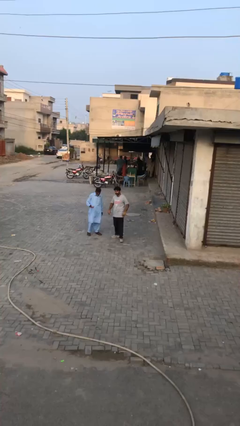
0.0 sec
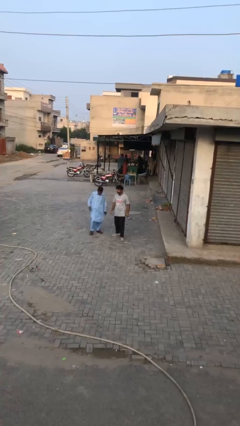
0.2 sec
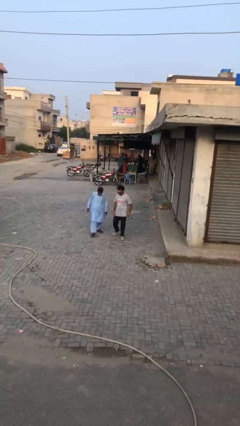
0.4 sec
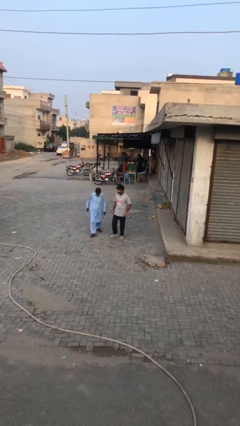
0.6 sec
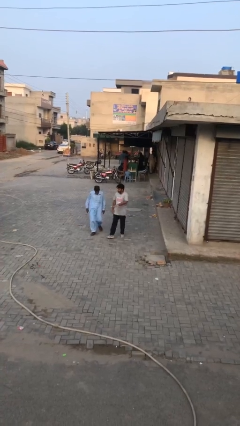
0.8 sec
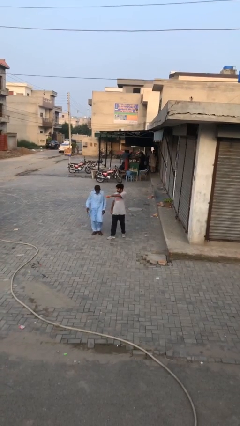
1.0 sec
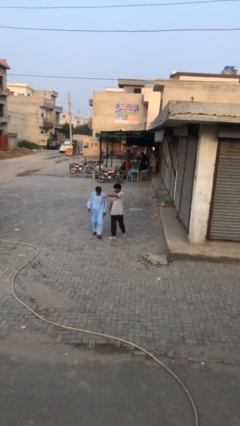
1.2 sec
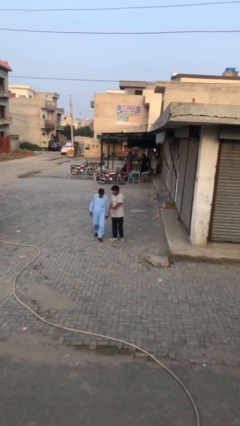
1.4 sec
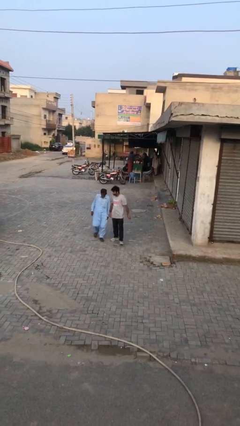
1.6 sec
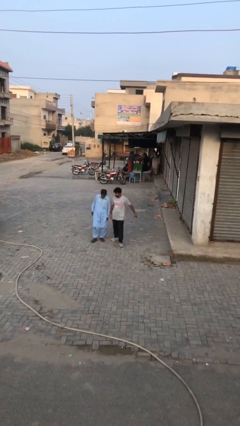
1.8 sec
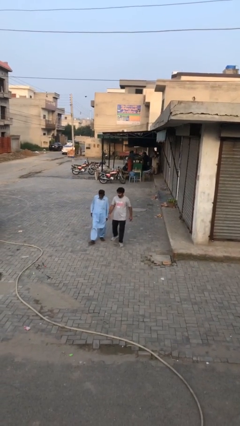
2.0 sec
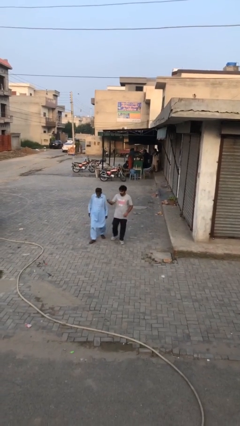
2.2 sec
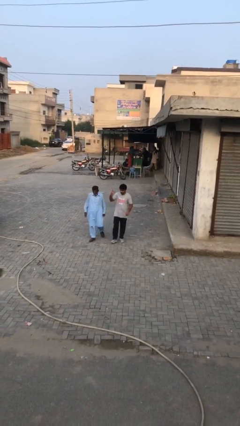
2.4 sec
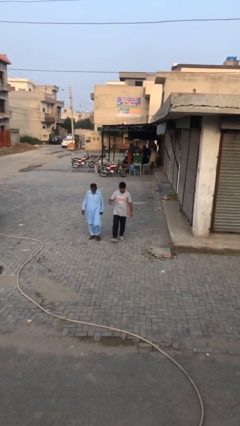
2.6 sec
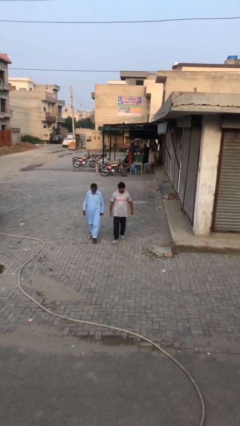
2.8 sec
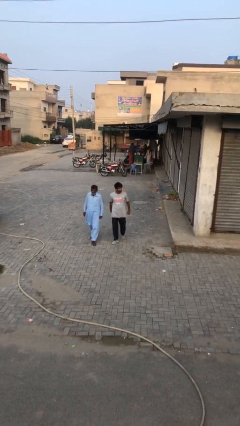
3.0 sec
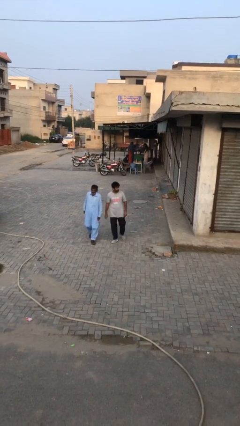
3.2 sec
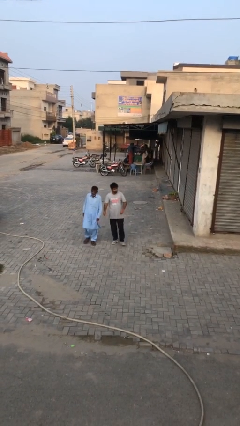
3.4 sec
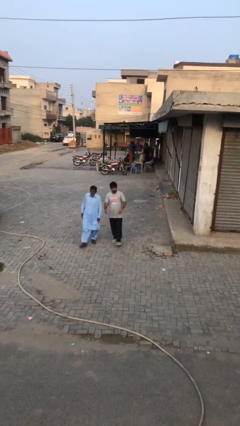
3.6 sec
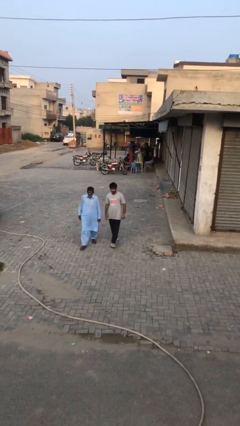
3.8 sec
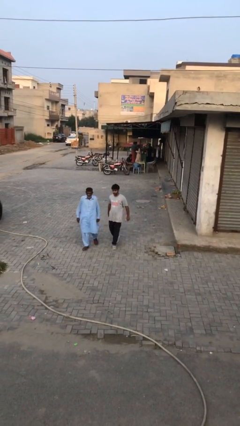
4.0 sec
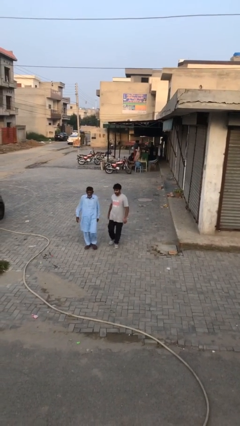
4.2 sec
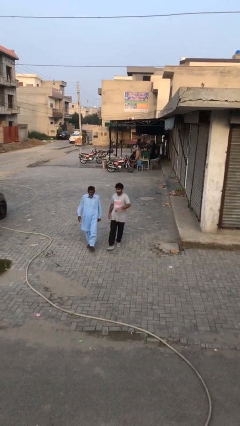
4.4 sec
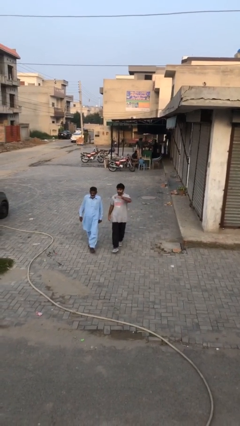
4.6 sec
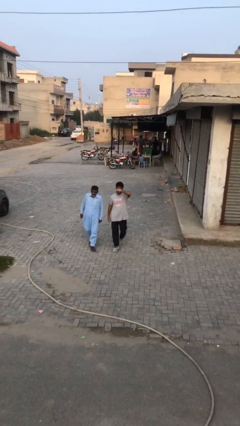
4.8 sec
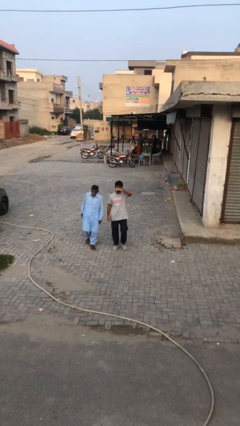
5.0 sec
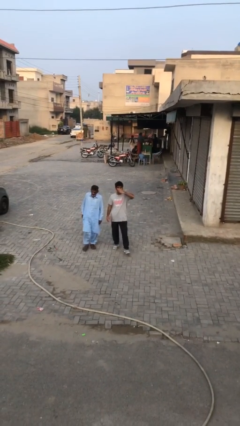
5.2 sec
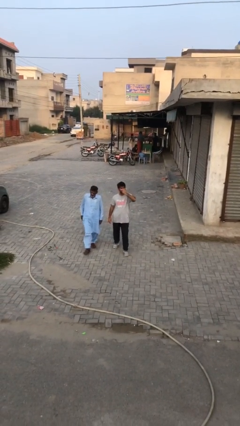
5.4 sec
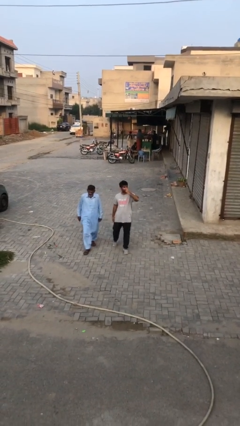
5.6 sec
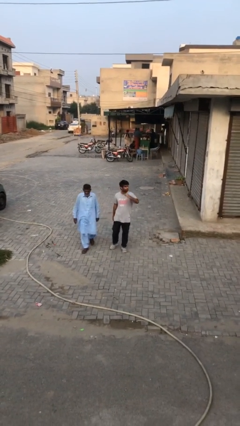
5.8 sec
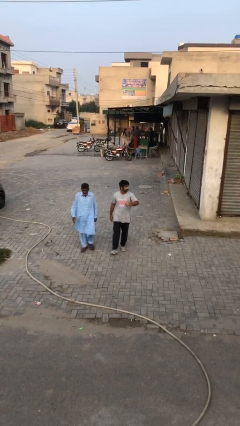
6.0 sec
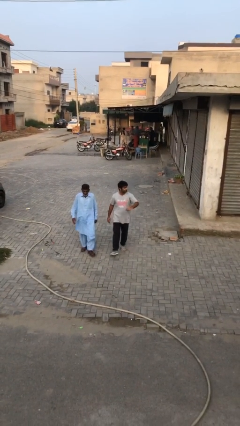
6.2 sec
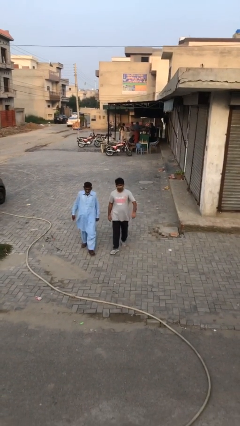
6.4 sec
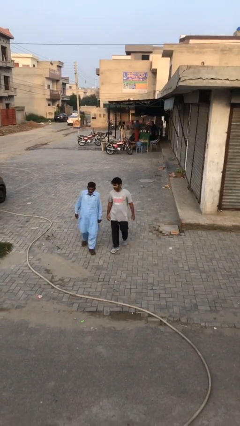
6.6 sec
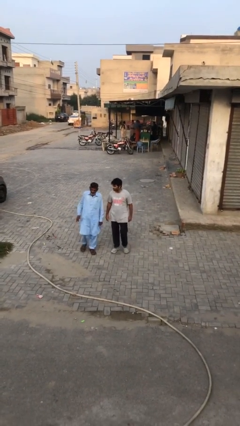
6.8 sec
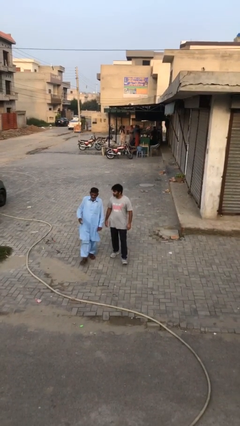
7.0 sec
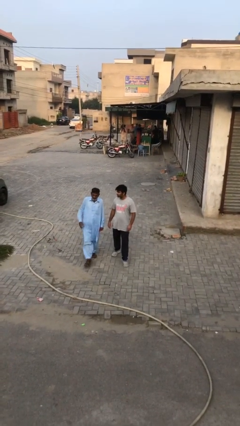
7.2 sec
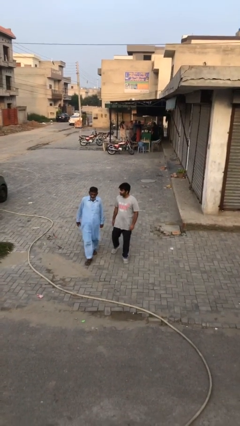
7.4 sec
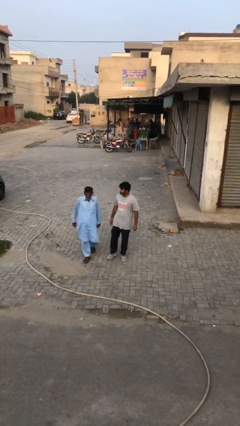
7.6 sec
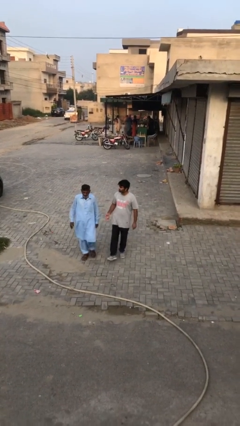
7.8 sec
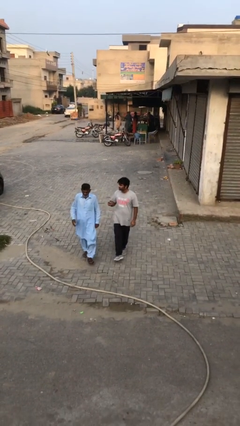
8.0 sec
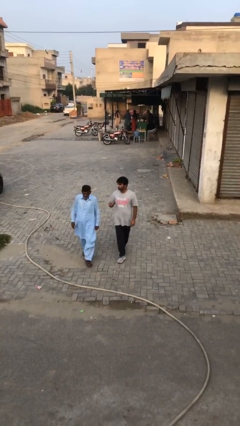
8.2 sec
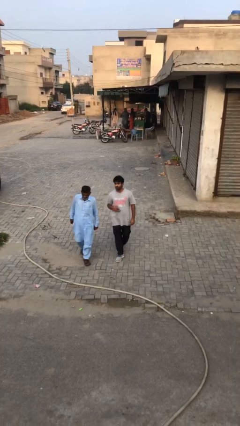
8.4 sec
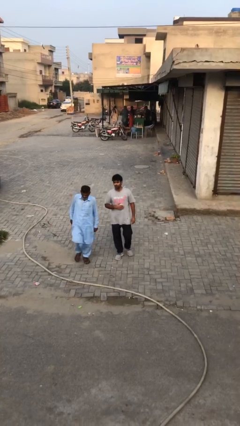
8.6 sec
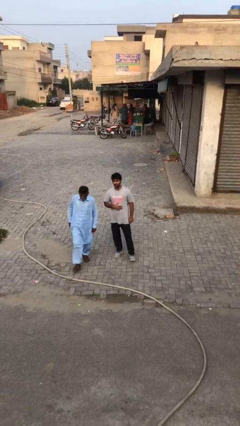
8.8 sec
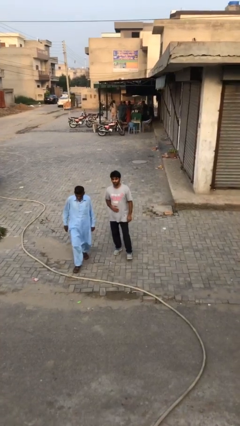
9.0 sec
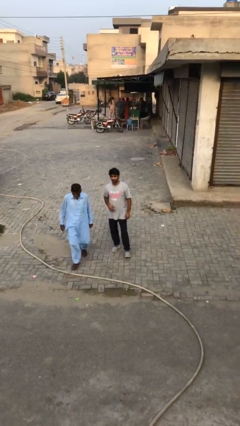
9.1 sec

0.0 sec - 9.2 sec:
person talks to person

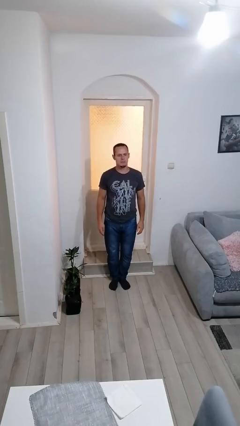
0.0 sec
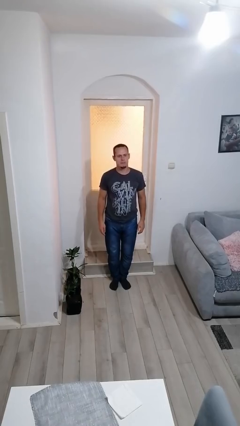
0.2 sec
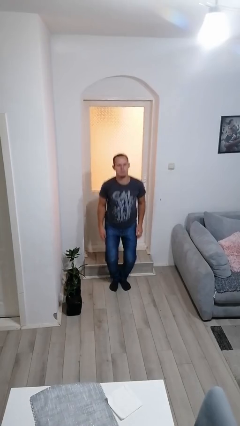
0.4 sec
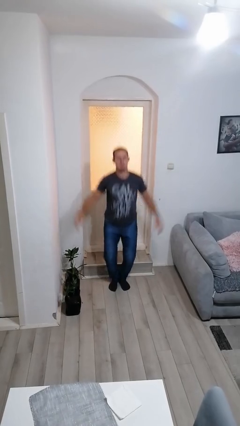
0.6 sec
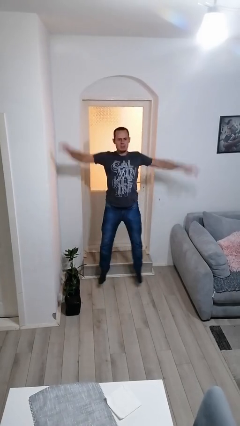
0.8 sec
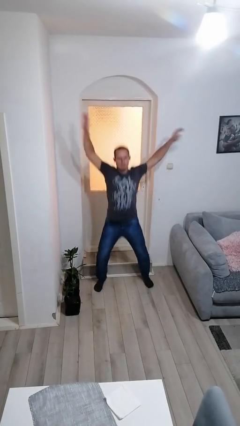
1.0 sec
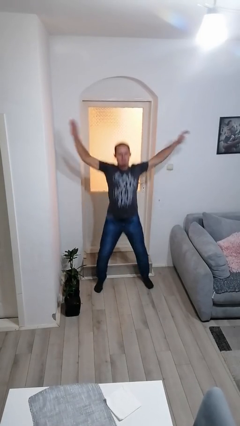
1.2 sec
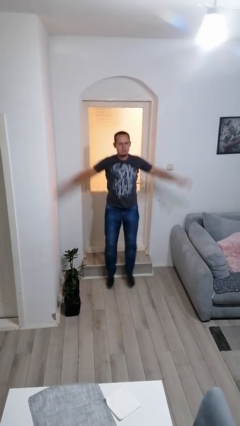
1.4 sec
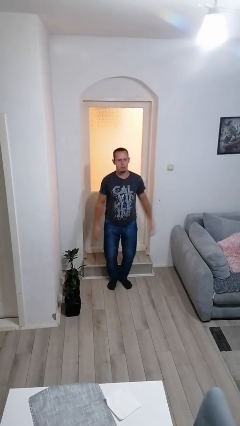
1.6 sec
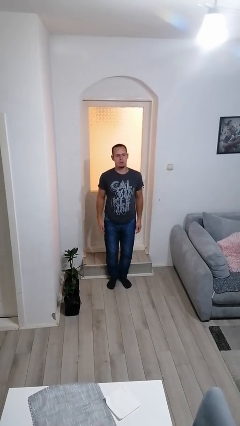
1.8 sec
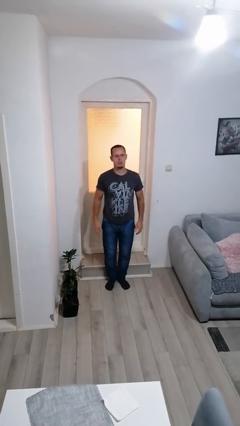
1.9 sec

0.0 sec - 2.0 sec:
person exercises with jumping jacks

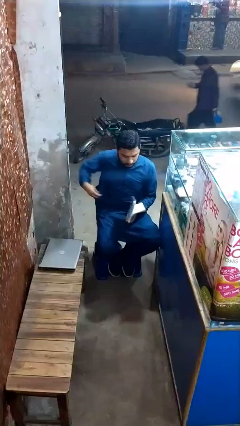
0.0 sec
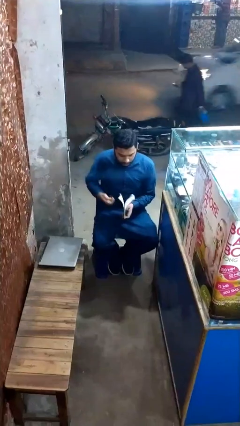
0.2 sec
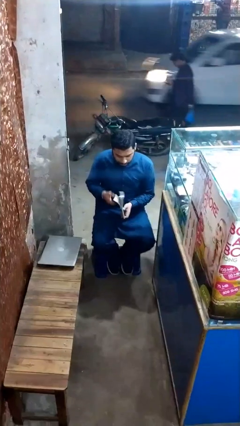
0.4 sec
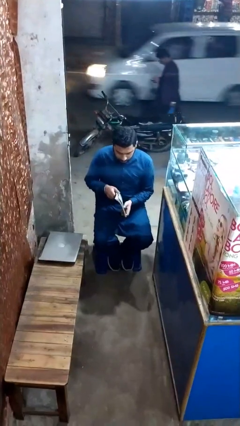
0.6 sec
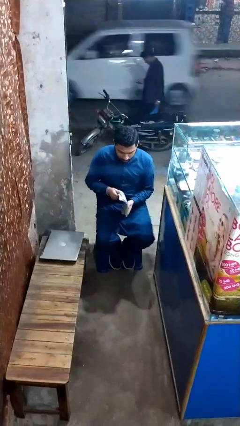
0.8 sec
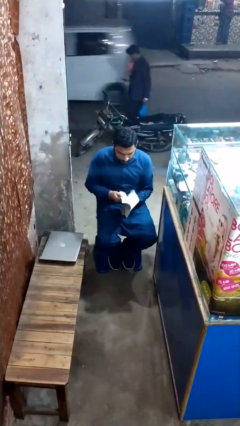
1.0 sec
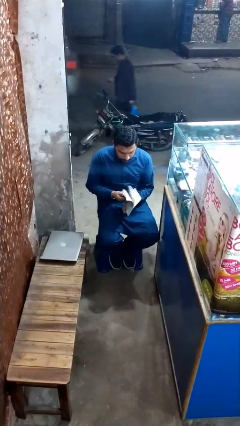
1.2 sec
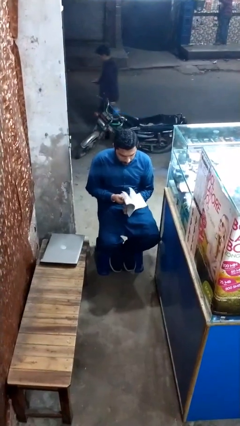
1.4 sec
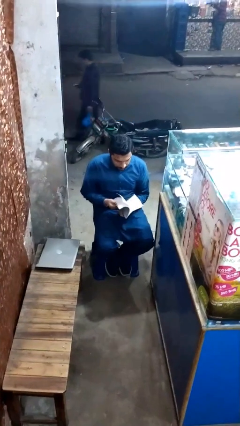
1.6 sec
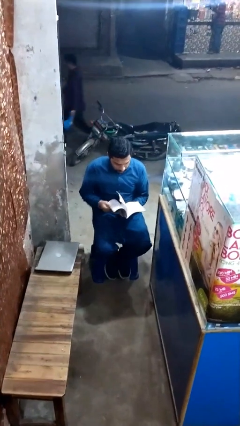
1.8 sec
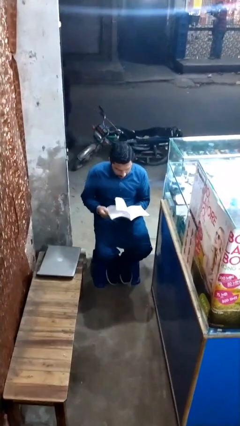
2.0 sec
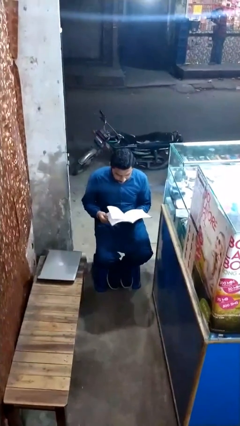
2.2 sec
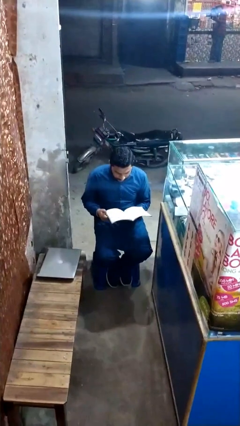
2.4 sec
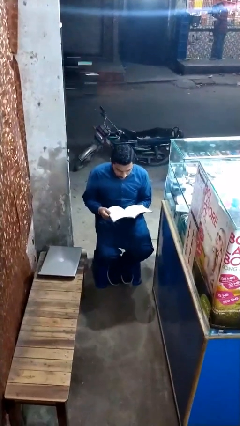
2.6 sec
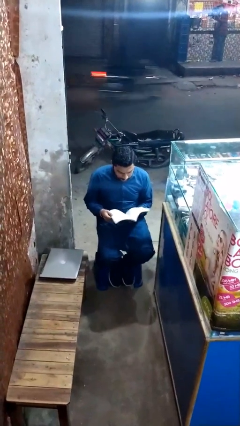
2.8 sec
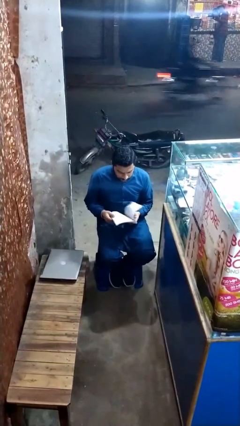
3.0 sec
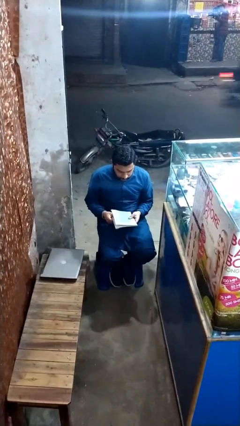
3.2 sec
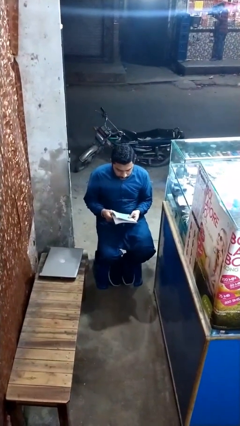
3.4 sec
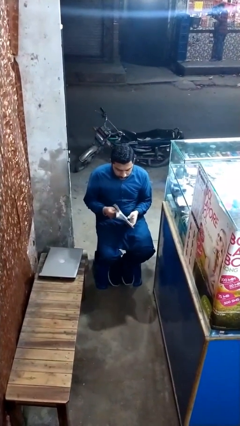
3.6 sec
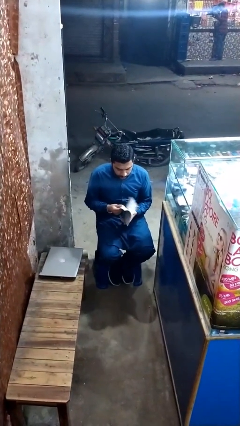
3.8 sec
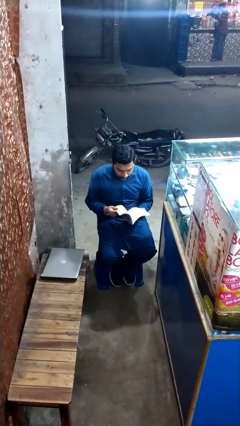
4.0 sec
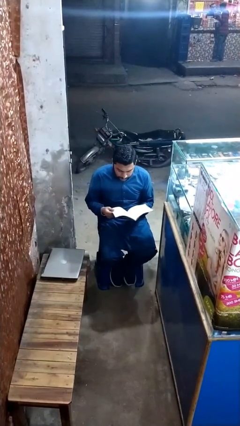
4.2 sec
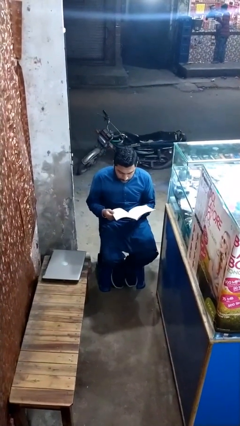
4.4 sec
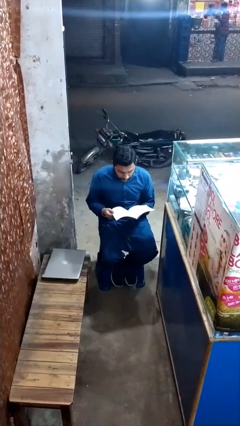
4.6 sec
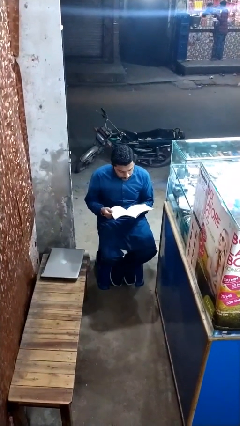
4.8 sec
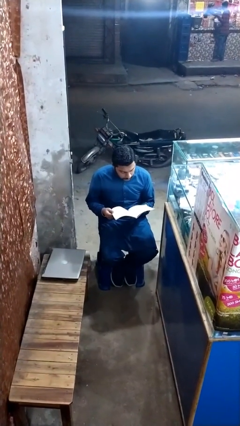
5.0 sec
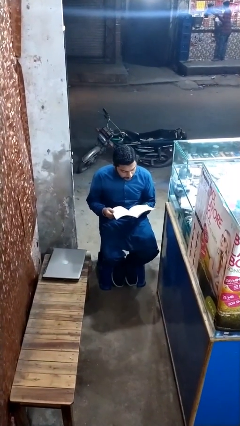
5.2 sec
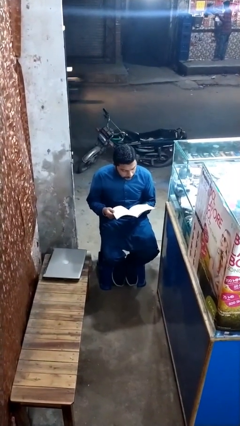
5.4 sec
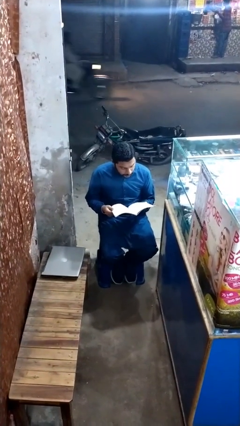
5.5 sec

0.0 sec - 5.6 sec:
person reads document

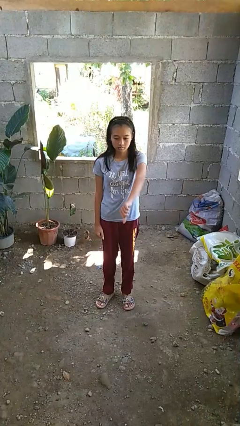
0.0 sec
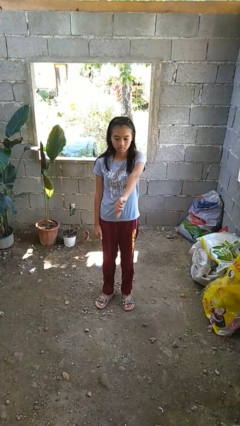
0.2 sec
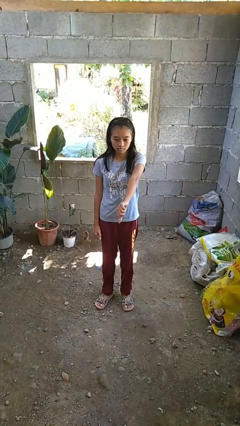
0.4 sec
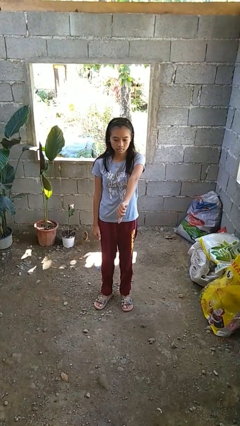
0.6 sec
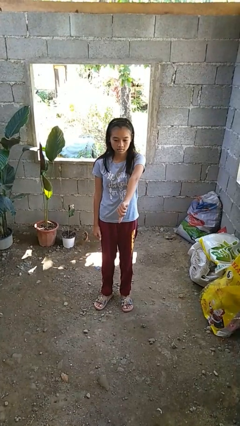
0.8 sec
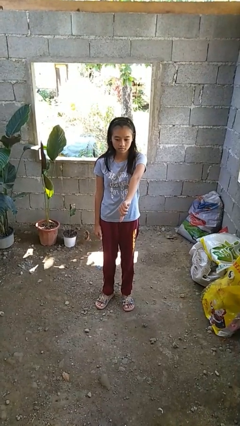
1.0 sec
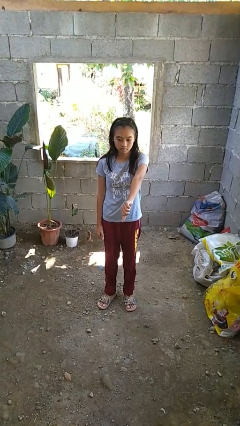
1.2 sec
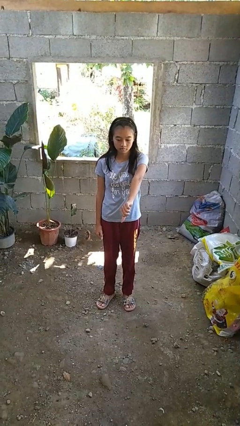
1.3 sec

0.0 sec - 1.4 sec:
person gestures thumbs down
